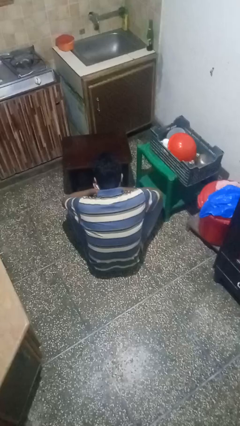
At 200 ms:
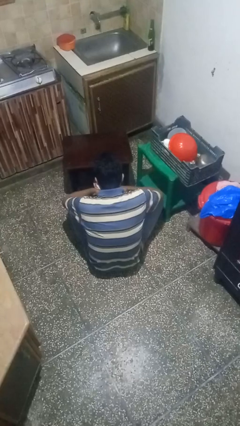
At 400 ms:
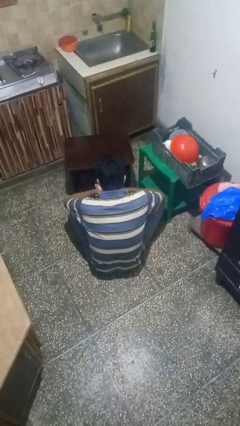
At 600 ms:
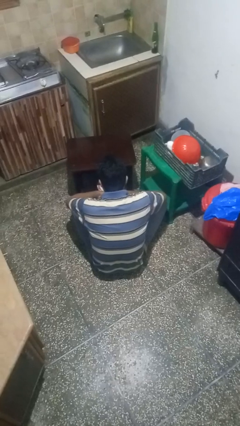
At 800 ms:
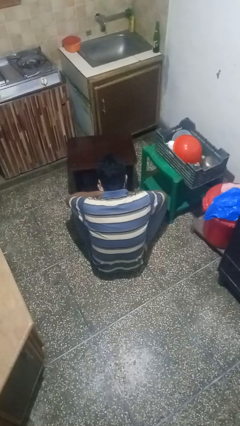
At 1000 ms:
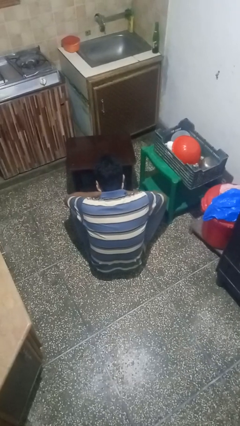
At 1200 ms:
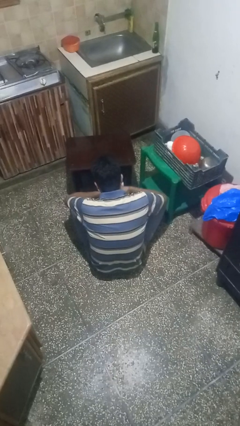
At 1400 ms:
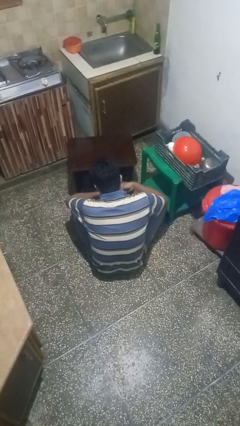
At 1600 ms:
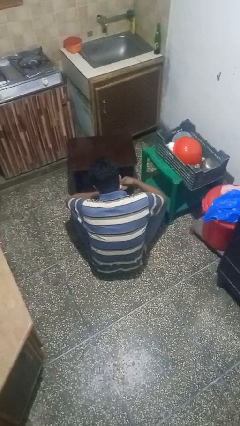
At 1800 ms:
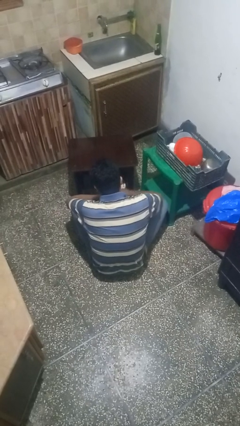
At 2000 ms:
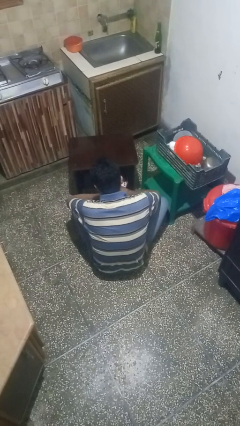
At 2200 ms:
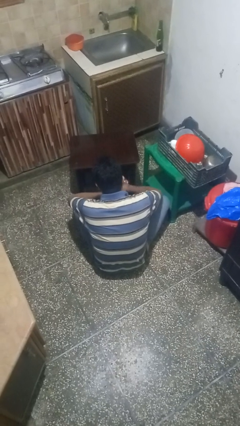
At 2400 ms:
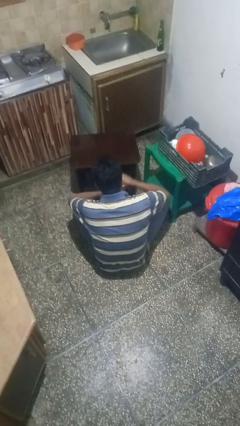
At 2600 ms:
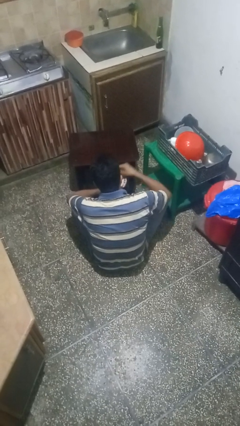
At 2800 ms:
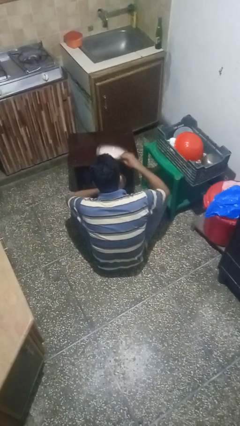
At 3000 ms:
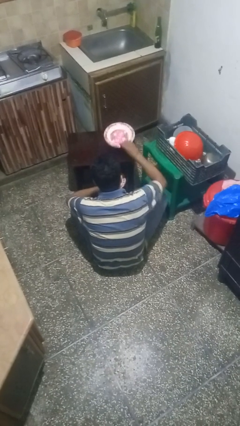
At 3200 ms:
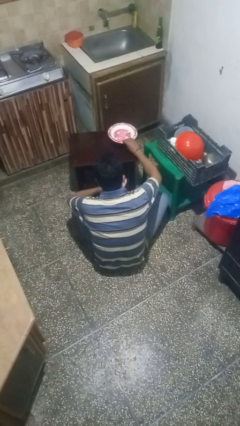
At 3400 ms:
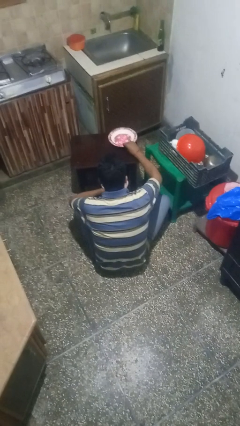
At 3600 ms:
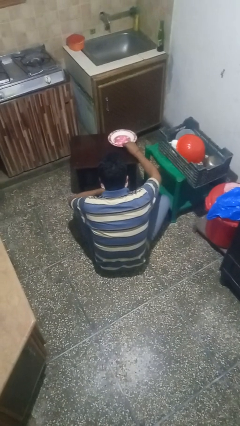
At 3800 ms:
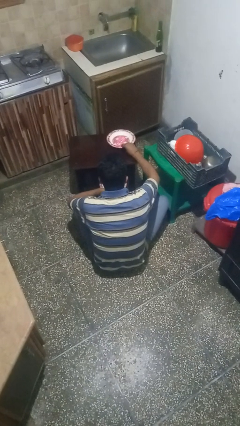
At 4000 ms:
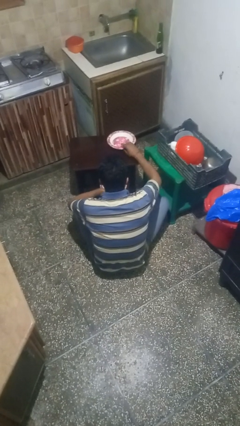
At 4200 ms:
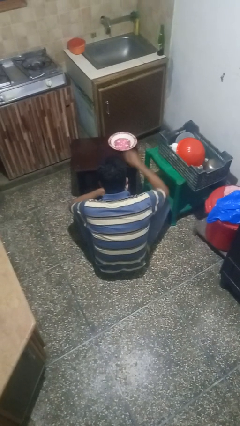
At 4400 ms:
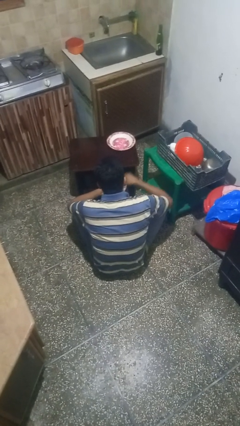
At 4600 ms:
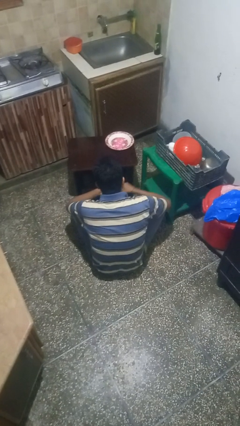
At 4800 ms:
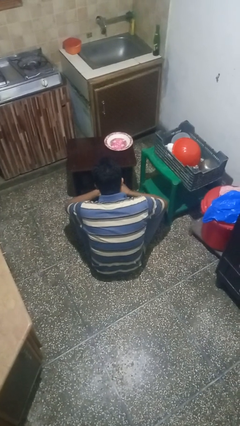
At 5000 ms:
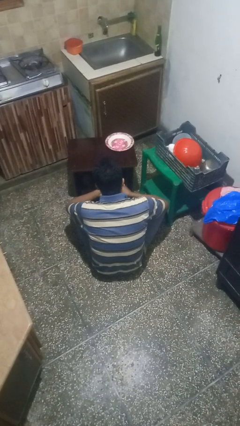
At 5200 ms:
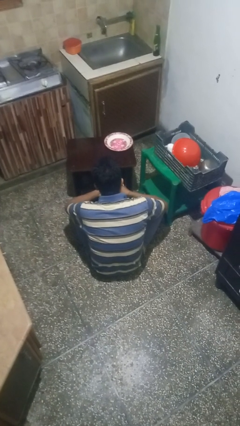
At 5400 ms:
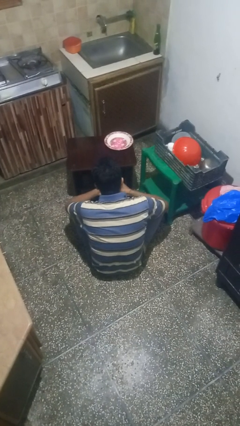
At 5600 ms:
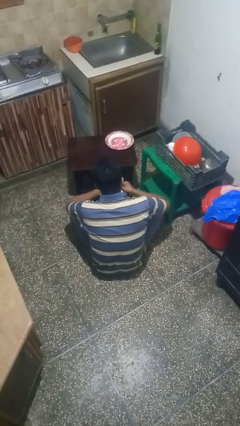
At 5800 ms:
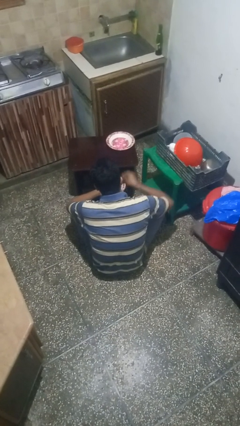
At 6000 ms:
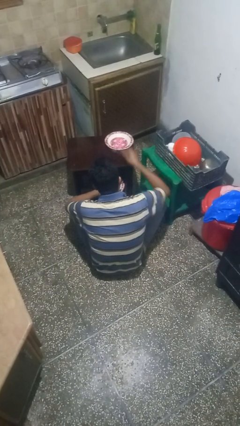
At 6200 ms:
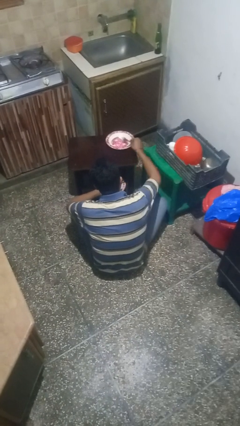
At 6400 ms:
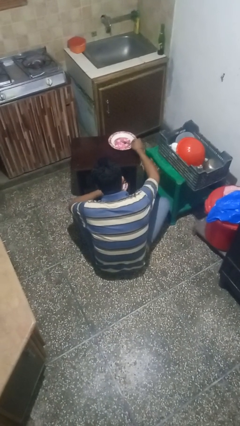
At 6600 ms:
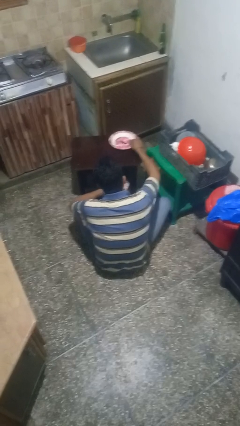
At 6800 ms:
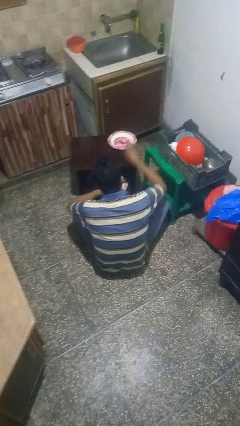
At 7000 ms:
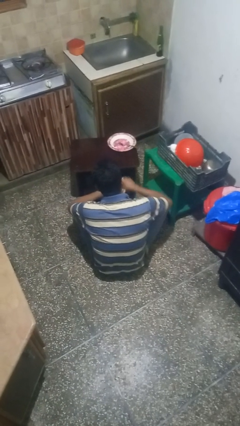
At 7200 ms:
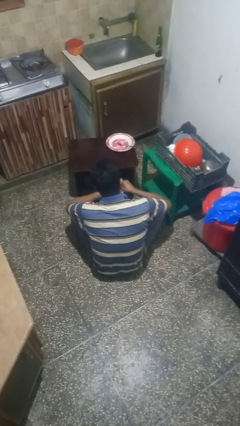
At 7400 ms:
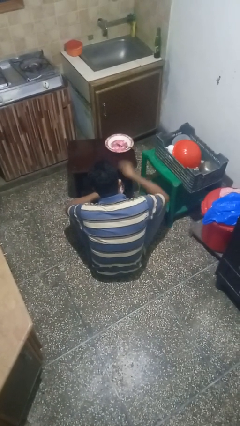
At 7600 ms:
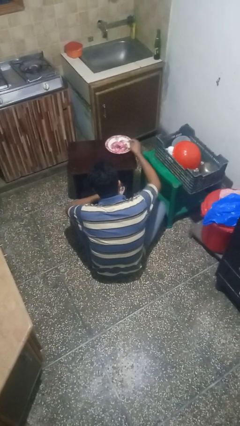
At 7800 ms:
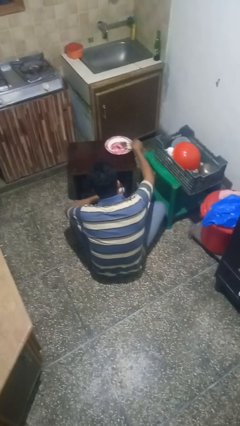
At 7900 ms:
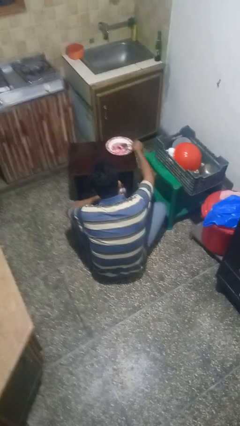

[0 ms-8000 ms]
person sets table

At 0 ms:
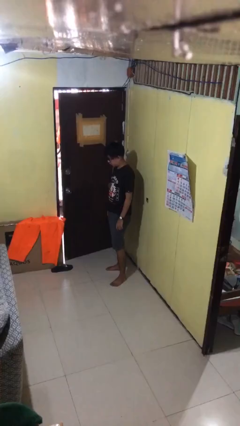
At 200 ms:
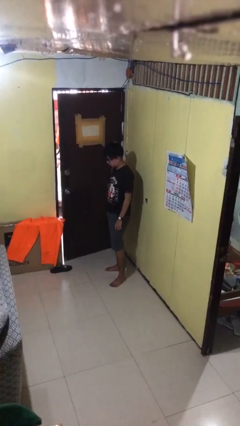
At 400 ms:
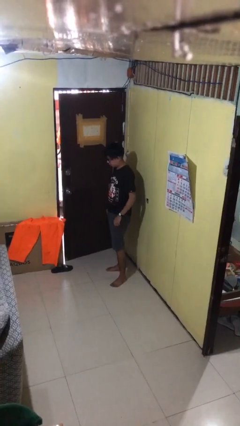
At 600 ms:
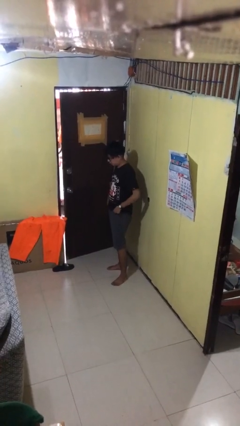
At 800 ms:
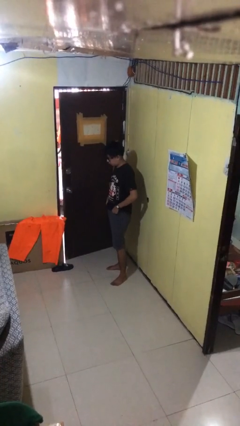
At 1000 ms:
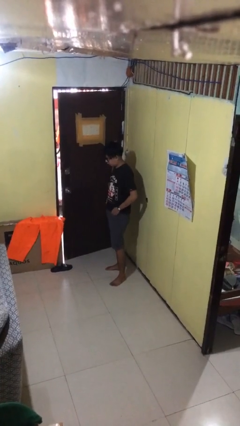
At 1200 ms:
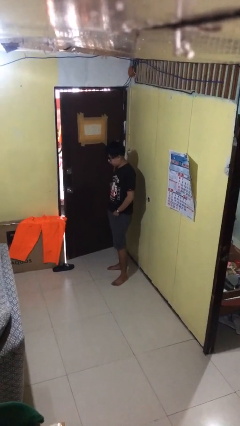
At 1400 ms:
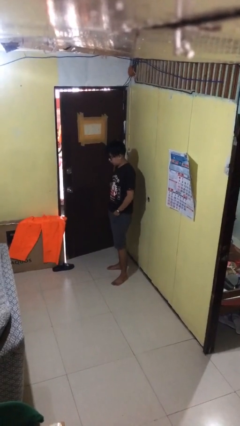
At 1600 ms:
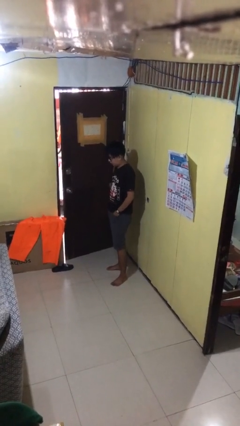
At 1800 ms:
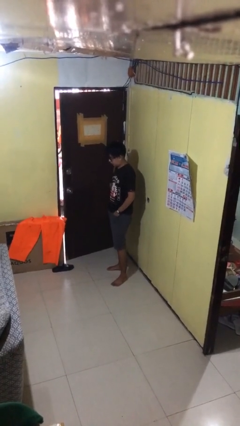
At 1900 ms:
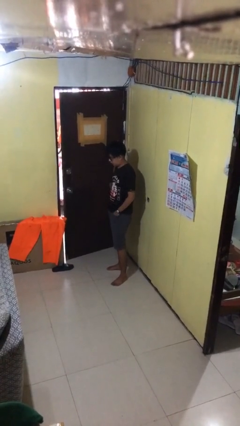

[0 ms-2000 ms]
person puts hands in back pockets

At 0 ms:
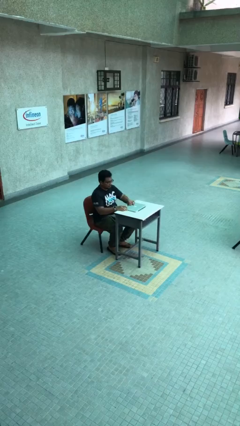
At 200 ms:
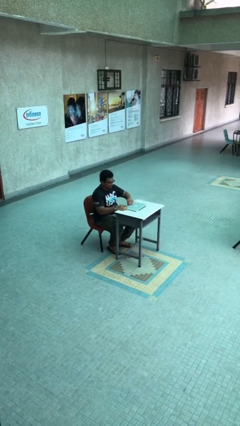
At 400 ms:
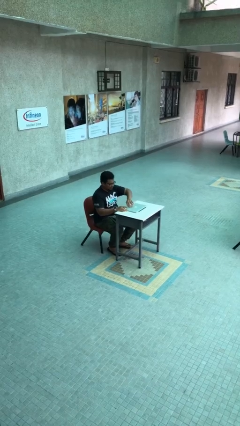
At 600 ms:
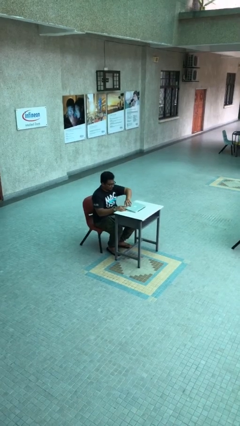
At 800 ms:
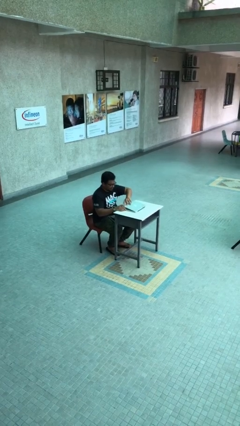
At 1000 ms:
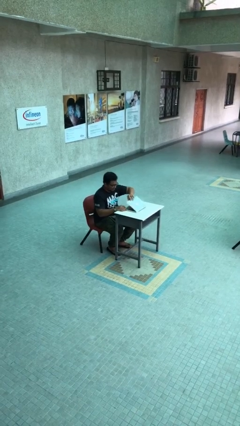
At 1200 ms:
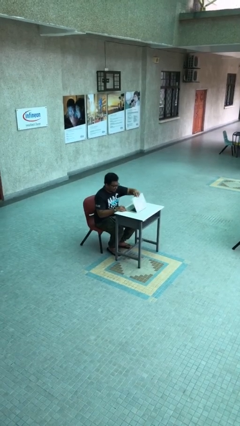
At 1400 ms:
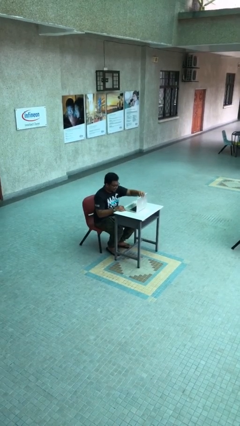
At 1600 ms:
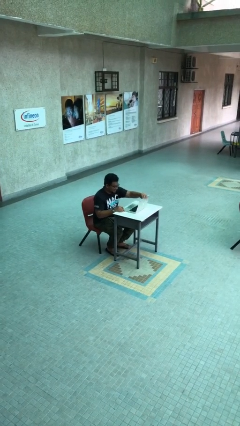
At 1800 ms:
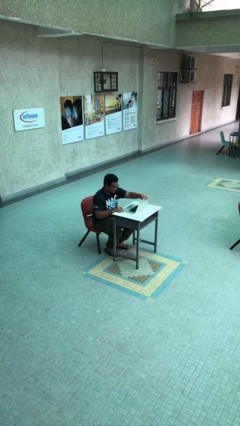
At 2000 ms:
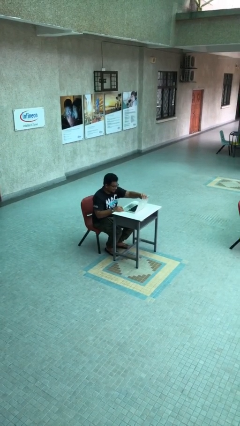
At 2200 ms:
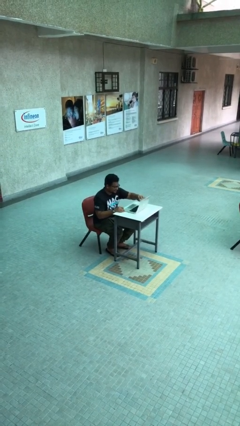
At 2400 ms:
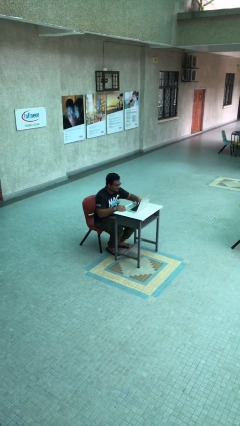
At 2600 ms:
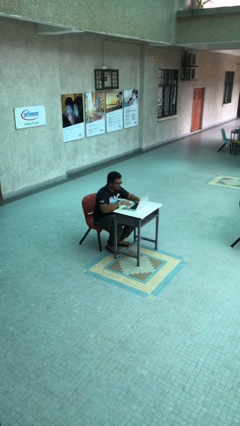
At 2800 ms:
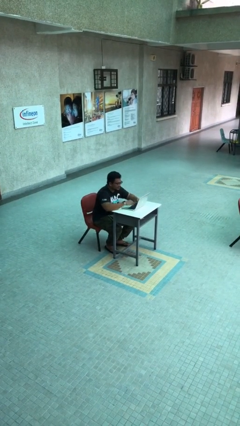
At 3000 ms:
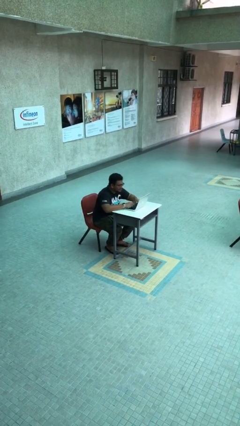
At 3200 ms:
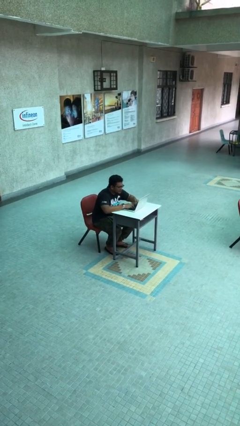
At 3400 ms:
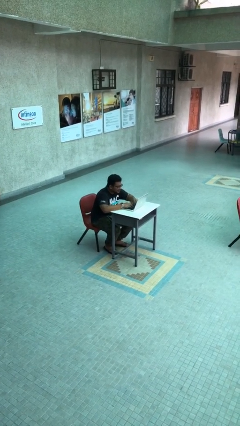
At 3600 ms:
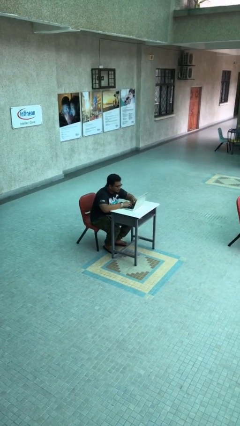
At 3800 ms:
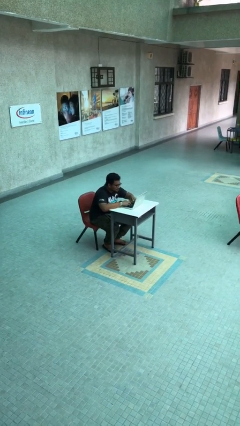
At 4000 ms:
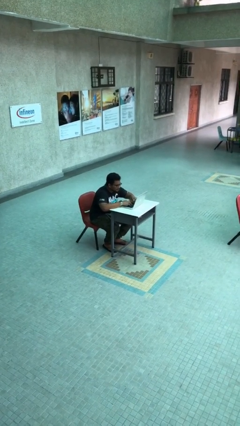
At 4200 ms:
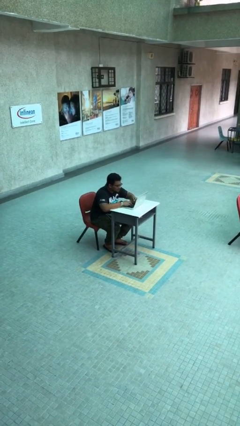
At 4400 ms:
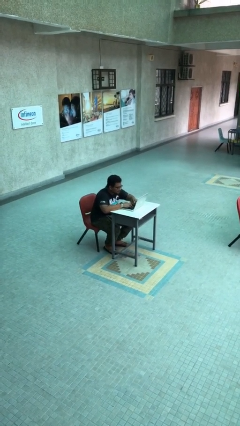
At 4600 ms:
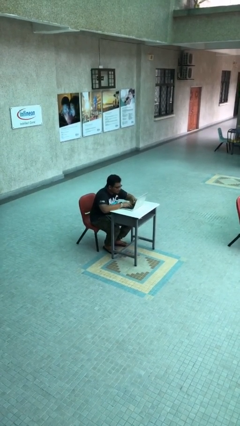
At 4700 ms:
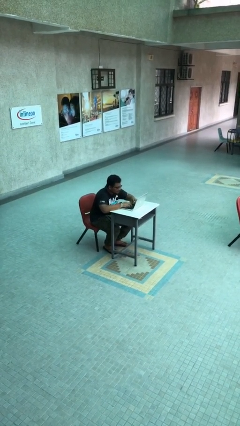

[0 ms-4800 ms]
person interacts with laptop

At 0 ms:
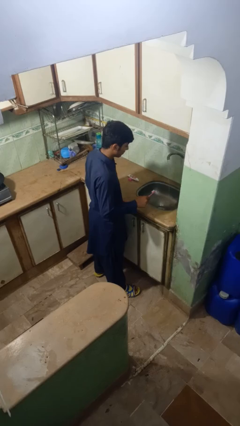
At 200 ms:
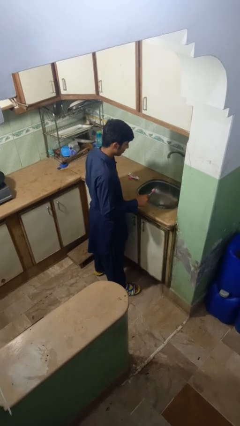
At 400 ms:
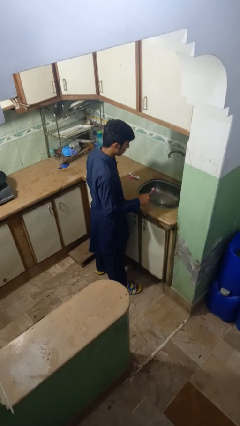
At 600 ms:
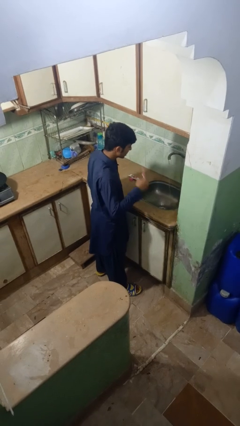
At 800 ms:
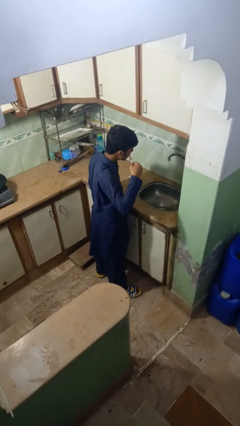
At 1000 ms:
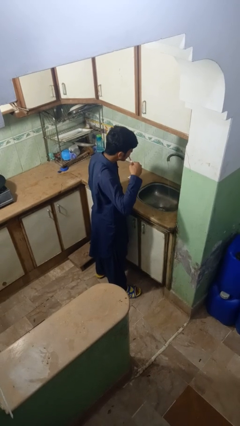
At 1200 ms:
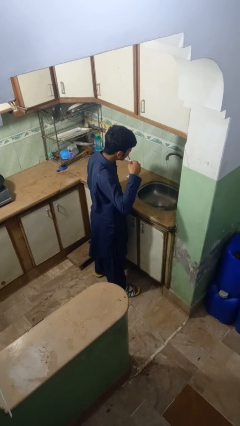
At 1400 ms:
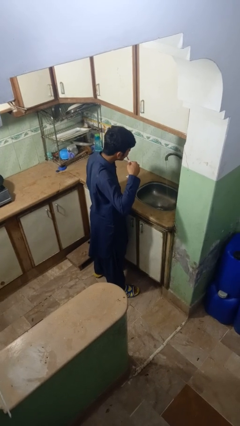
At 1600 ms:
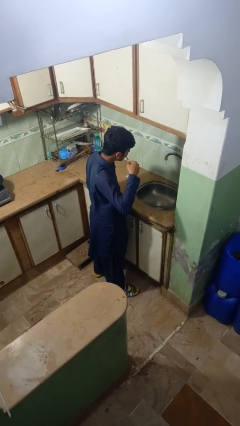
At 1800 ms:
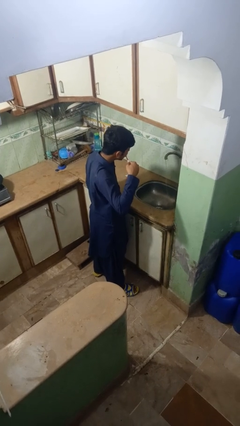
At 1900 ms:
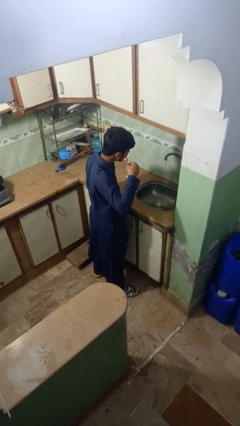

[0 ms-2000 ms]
person brushes teeth

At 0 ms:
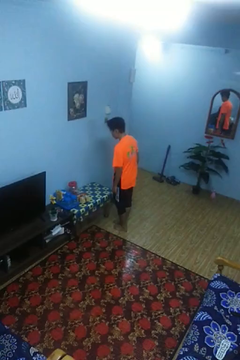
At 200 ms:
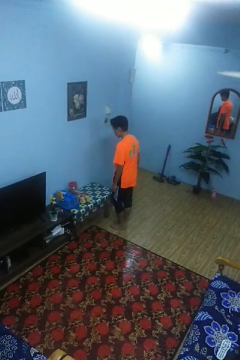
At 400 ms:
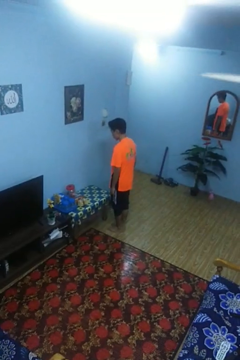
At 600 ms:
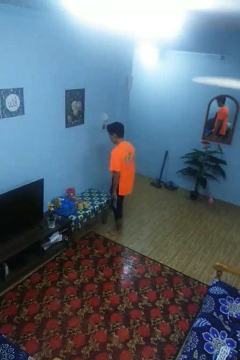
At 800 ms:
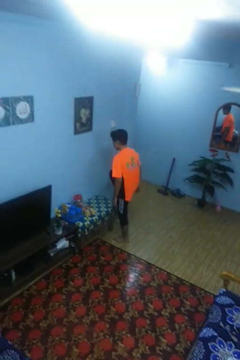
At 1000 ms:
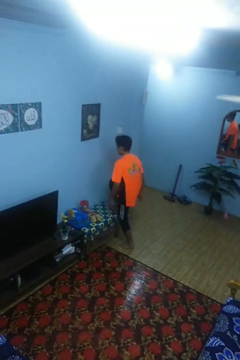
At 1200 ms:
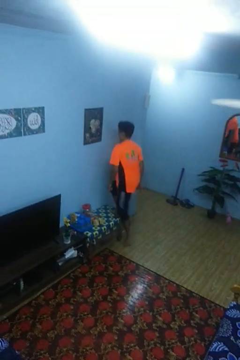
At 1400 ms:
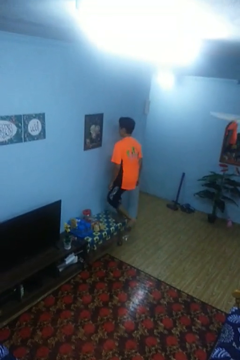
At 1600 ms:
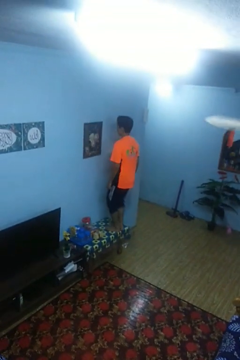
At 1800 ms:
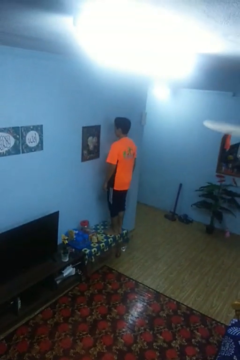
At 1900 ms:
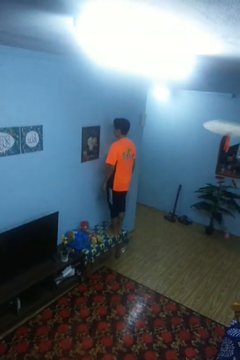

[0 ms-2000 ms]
person climbs on table
